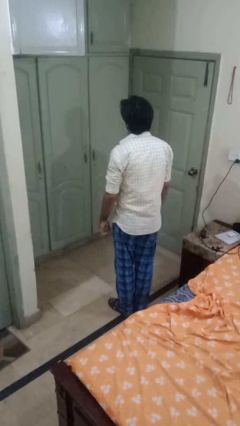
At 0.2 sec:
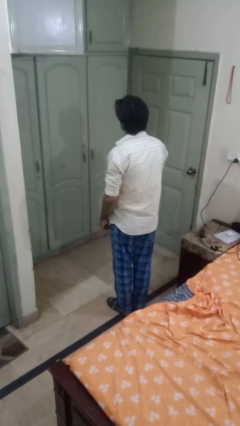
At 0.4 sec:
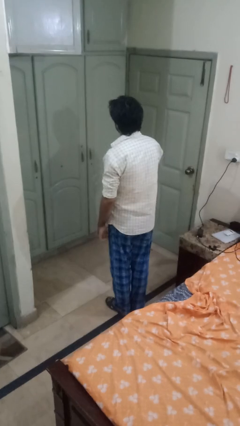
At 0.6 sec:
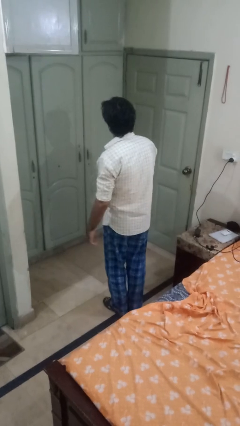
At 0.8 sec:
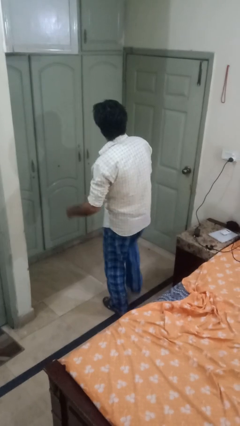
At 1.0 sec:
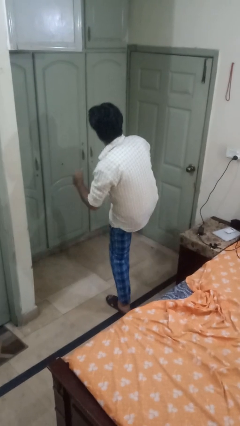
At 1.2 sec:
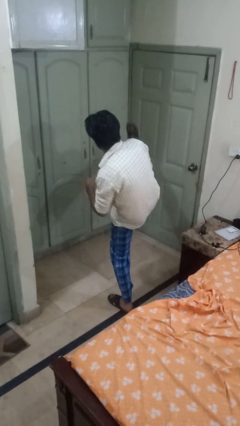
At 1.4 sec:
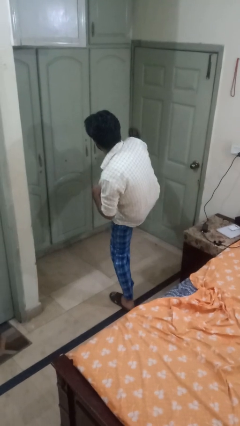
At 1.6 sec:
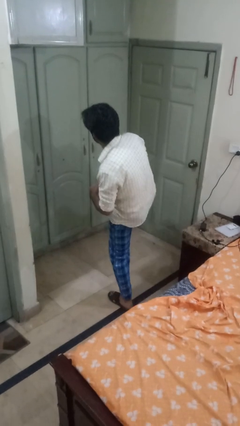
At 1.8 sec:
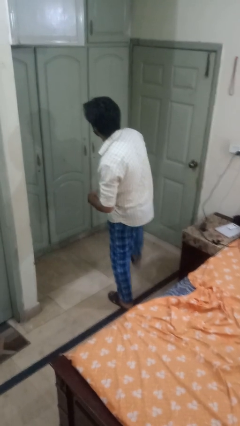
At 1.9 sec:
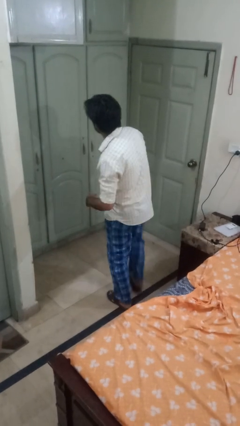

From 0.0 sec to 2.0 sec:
person karate kicks

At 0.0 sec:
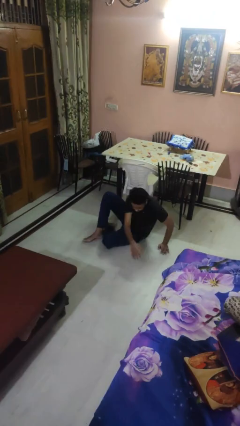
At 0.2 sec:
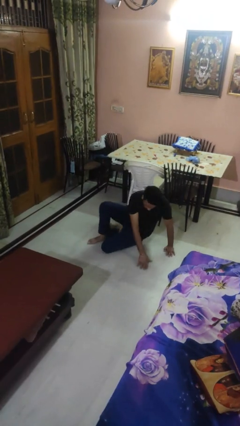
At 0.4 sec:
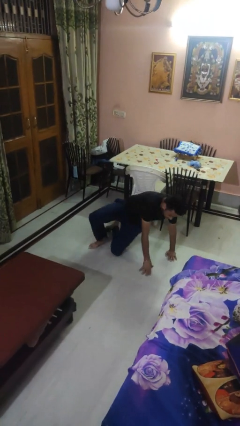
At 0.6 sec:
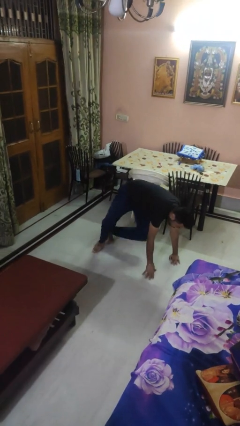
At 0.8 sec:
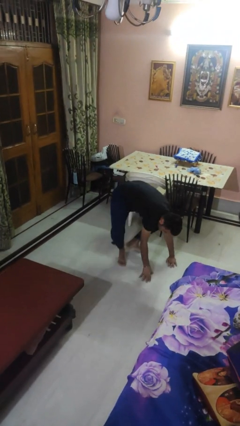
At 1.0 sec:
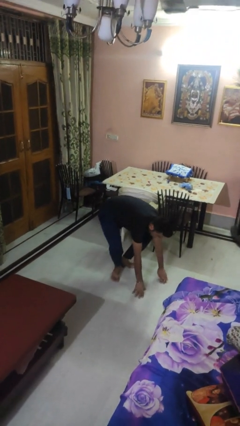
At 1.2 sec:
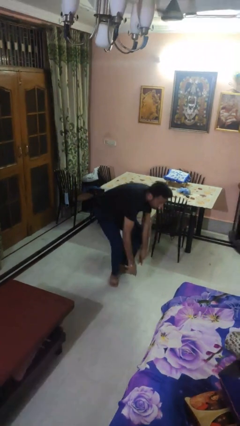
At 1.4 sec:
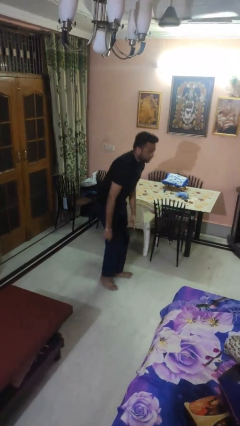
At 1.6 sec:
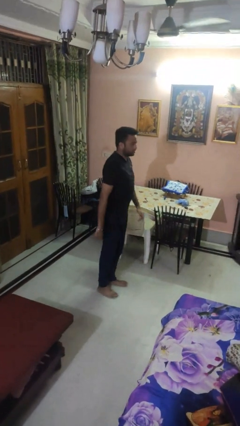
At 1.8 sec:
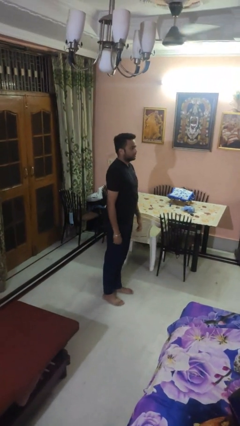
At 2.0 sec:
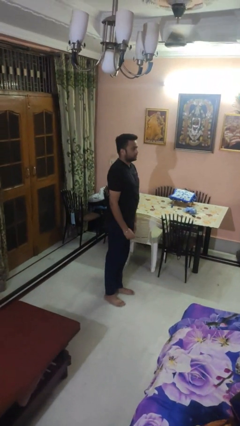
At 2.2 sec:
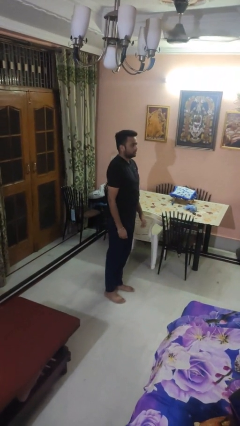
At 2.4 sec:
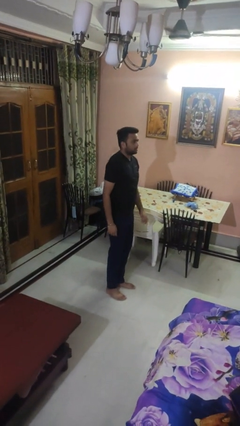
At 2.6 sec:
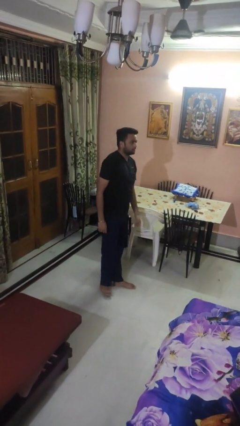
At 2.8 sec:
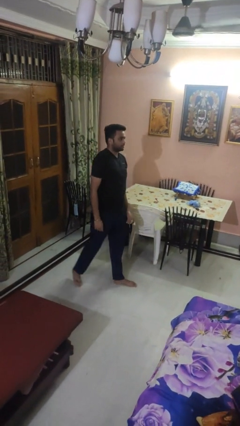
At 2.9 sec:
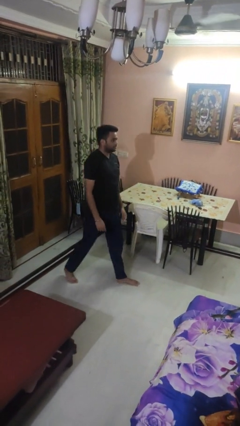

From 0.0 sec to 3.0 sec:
person stands up from floor

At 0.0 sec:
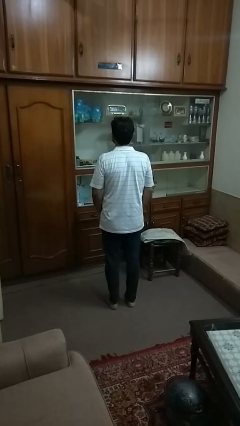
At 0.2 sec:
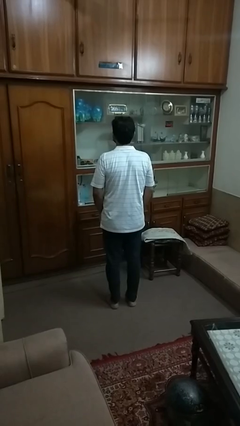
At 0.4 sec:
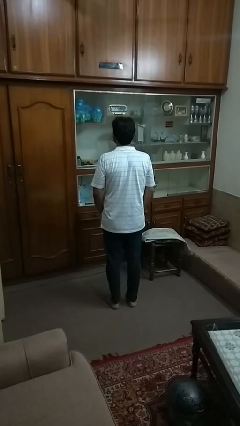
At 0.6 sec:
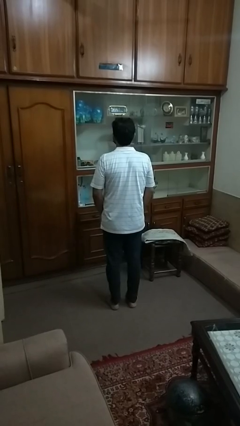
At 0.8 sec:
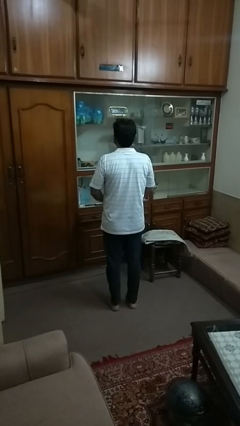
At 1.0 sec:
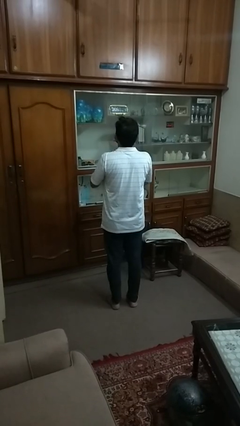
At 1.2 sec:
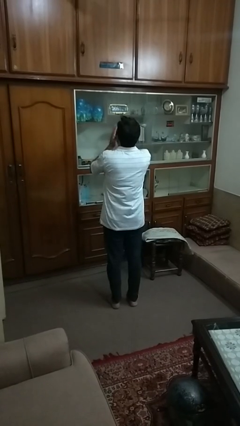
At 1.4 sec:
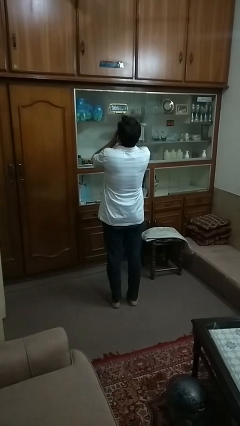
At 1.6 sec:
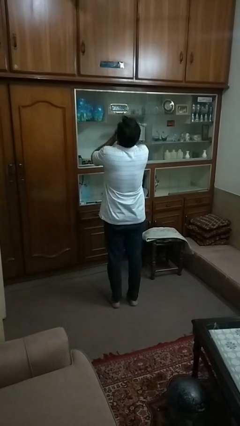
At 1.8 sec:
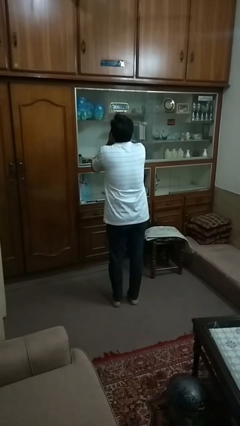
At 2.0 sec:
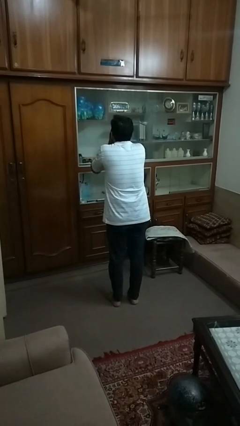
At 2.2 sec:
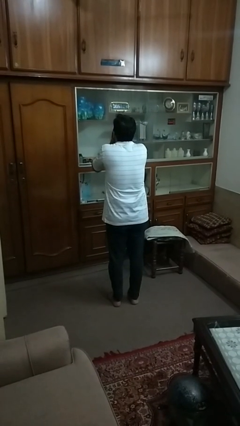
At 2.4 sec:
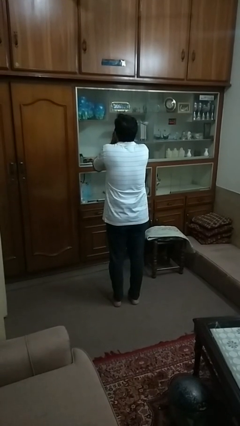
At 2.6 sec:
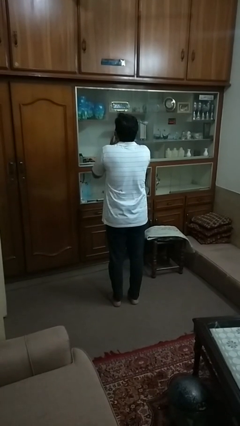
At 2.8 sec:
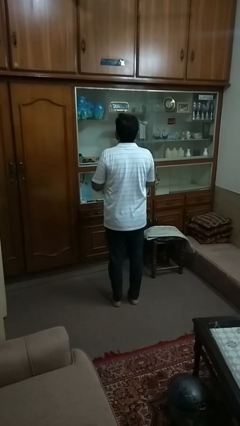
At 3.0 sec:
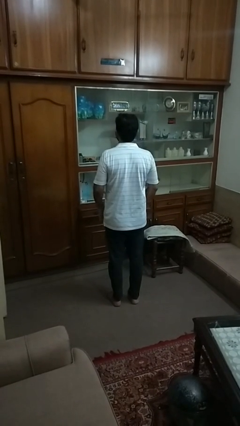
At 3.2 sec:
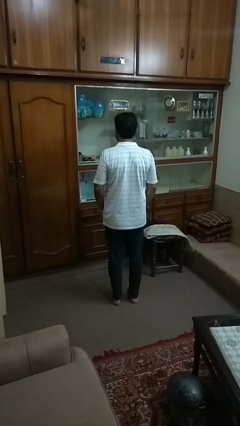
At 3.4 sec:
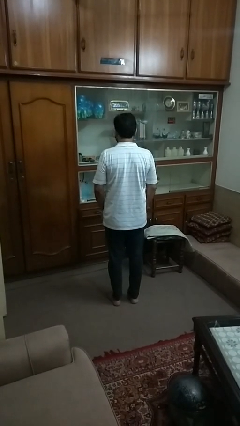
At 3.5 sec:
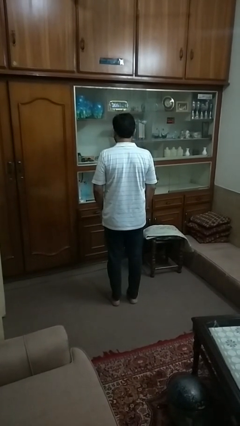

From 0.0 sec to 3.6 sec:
person sneezes into hand

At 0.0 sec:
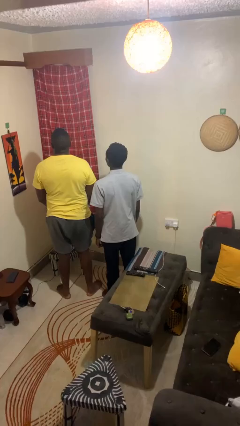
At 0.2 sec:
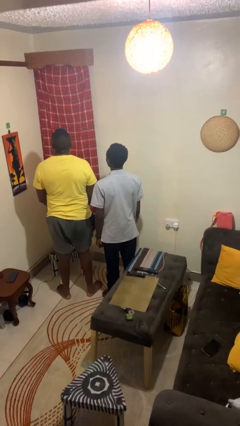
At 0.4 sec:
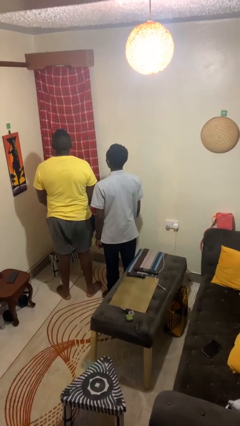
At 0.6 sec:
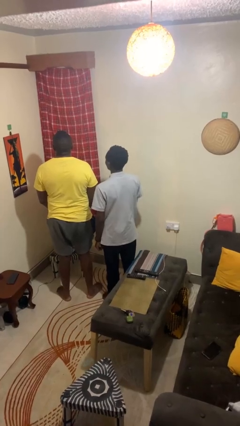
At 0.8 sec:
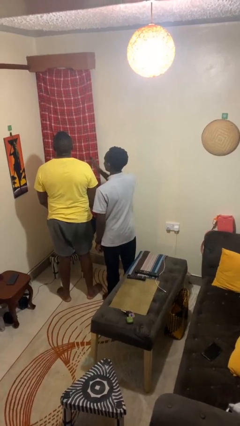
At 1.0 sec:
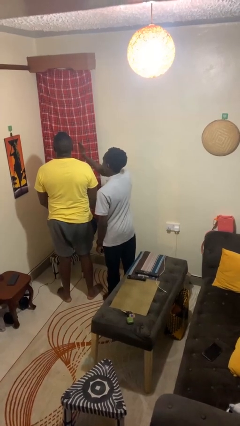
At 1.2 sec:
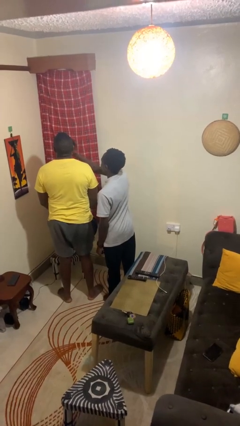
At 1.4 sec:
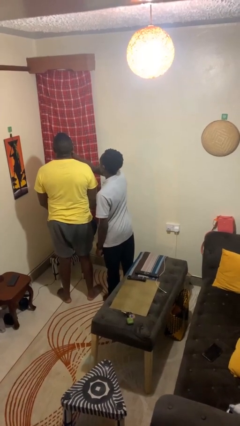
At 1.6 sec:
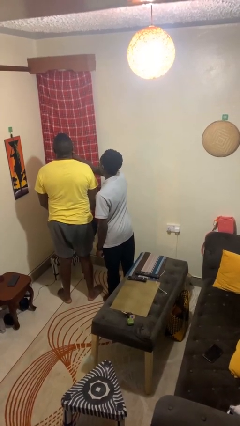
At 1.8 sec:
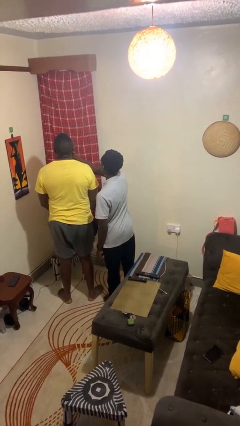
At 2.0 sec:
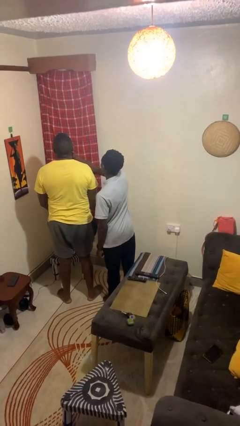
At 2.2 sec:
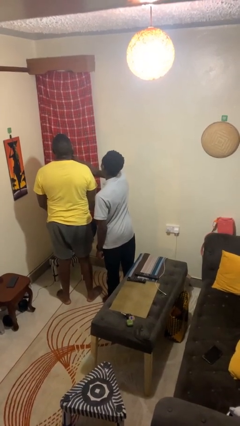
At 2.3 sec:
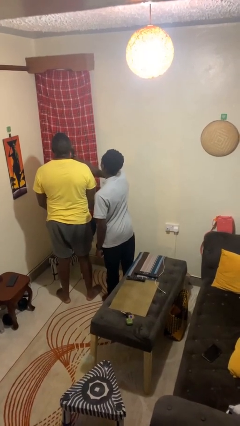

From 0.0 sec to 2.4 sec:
person touches face of person

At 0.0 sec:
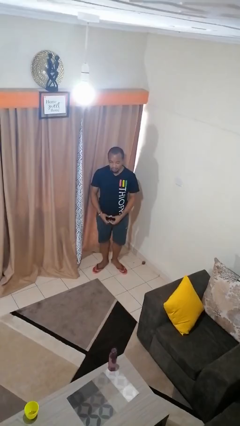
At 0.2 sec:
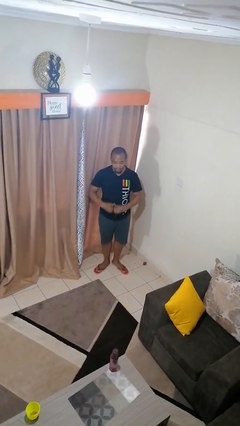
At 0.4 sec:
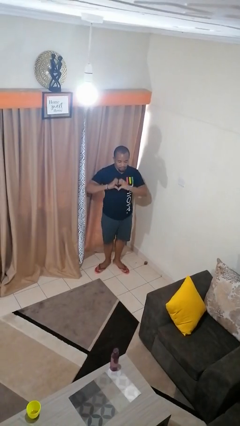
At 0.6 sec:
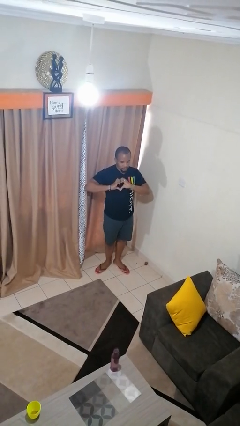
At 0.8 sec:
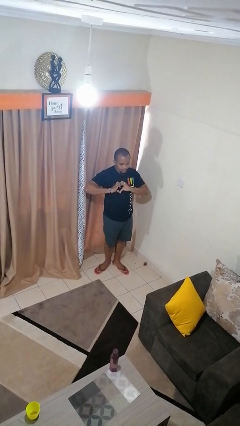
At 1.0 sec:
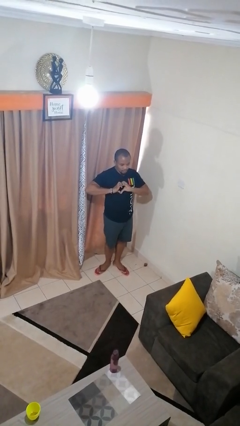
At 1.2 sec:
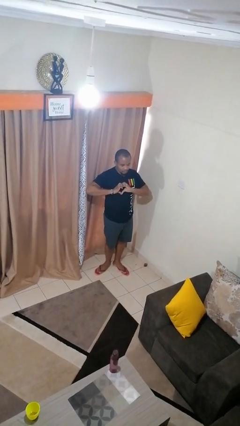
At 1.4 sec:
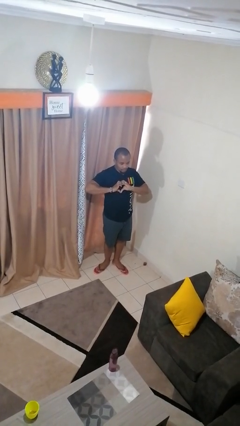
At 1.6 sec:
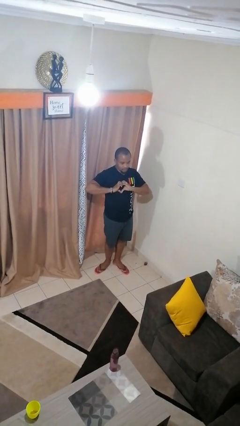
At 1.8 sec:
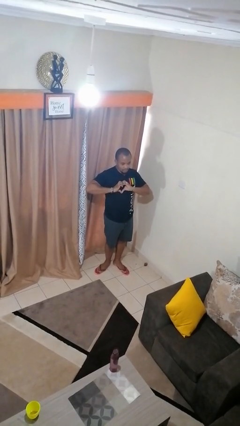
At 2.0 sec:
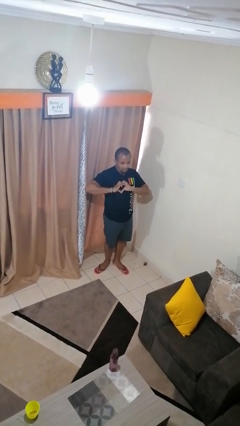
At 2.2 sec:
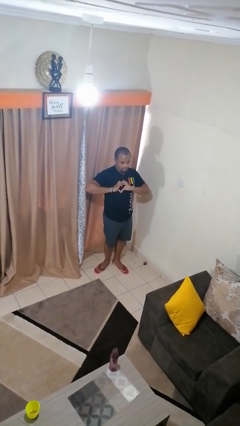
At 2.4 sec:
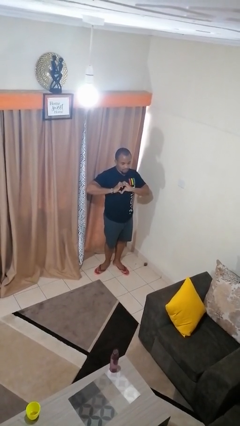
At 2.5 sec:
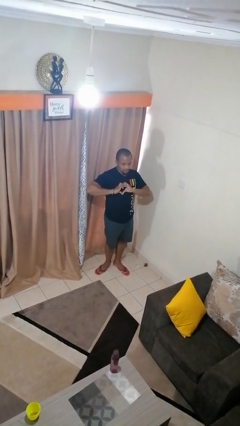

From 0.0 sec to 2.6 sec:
person gestures heart

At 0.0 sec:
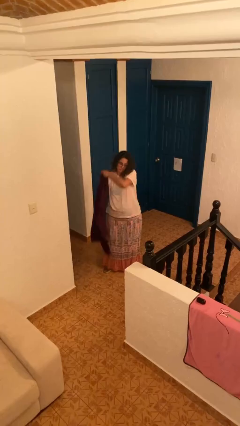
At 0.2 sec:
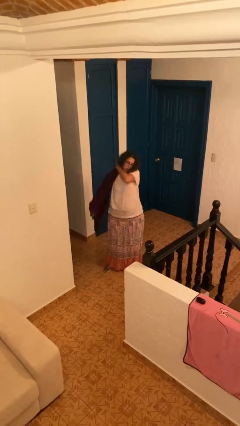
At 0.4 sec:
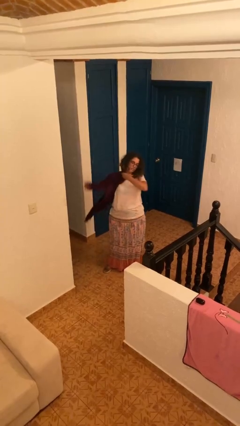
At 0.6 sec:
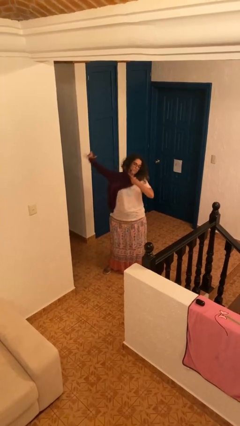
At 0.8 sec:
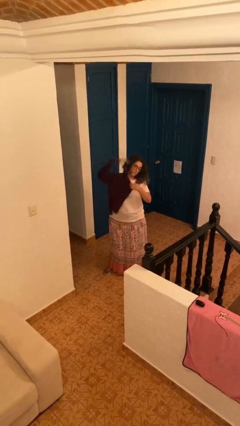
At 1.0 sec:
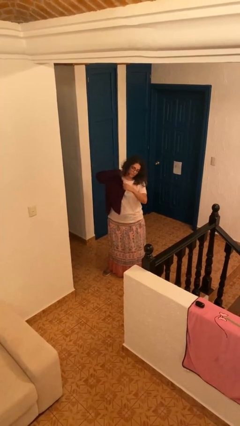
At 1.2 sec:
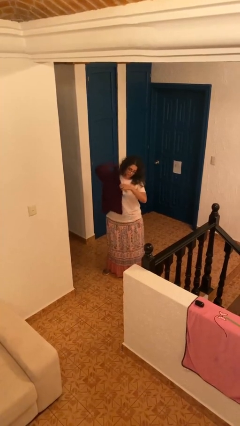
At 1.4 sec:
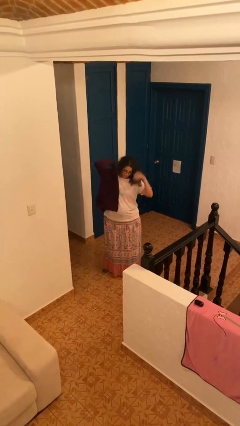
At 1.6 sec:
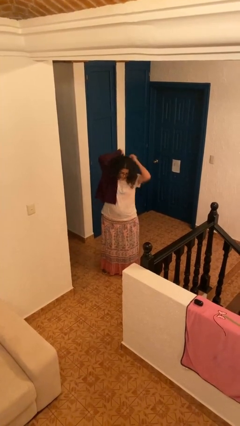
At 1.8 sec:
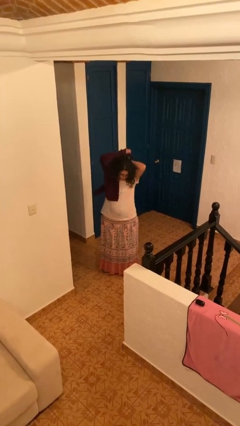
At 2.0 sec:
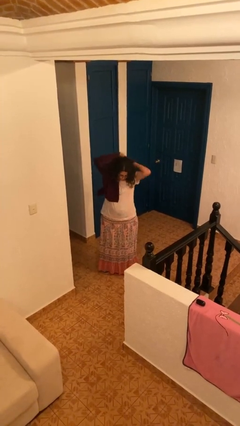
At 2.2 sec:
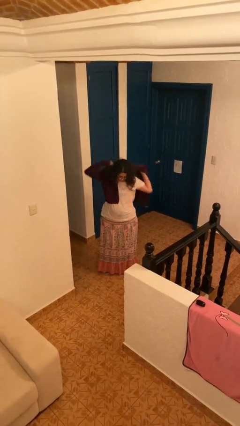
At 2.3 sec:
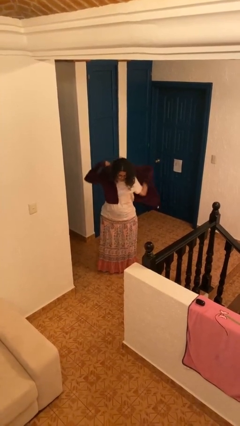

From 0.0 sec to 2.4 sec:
person puts on jacket

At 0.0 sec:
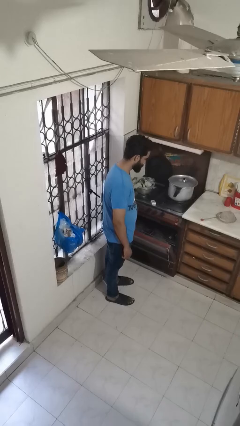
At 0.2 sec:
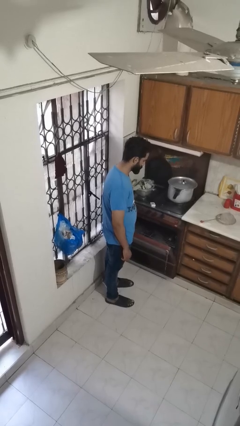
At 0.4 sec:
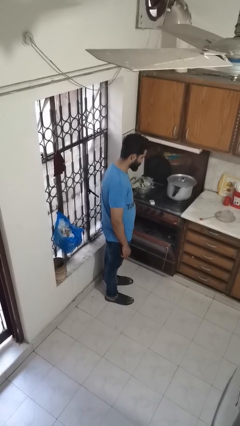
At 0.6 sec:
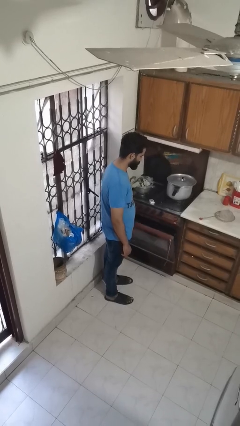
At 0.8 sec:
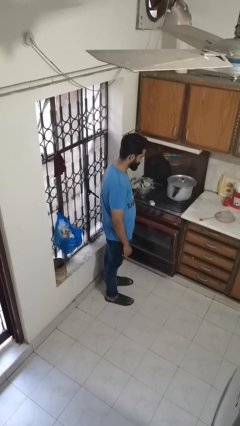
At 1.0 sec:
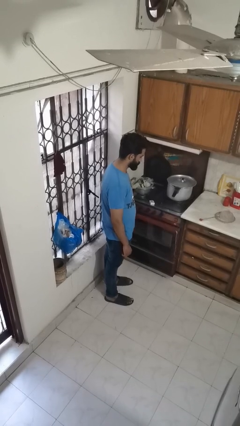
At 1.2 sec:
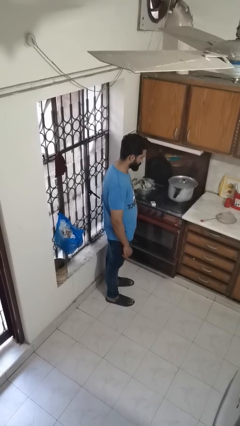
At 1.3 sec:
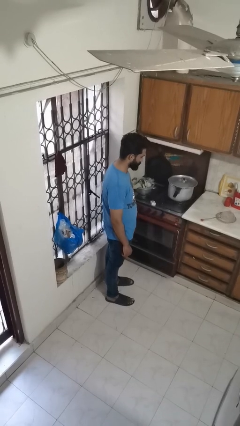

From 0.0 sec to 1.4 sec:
person closes oven door
